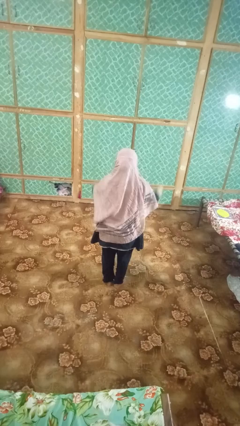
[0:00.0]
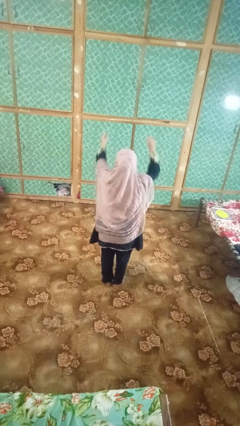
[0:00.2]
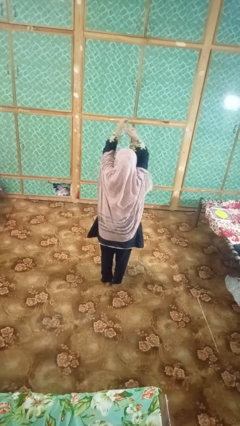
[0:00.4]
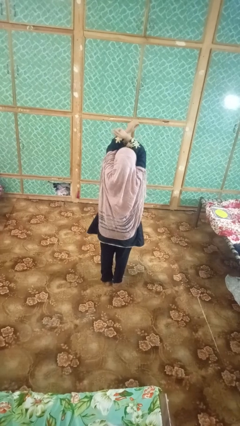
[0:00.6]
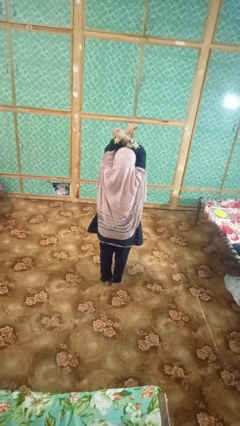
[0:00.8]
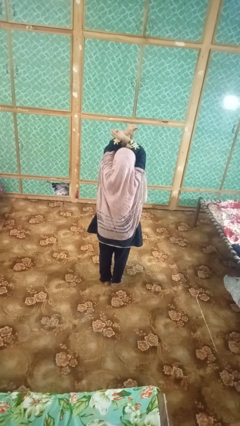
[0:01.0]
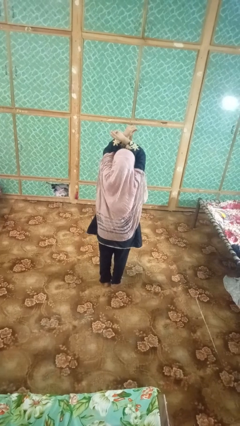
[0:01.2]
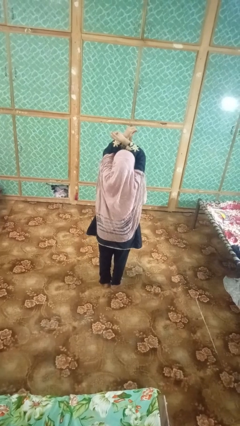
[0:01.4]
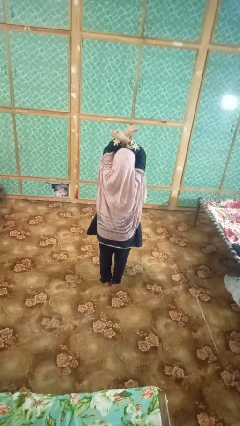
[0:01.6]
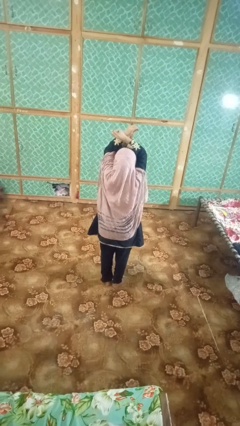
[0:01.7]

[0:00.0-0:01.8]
person gestures arms x

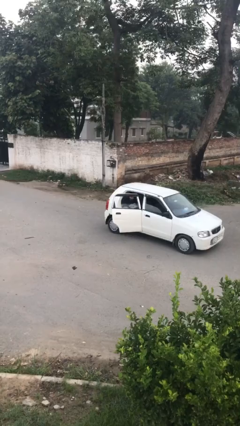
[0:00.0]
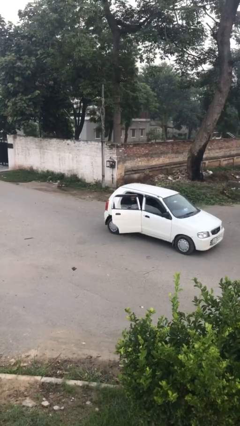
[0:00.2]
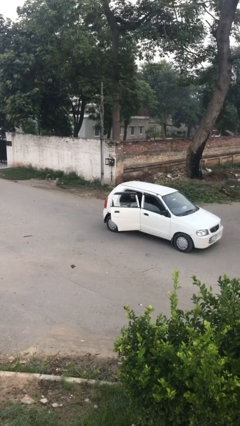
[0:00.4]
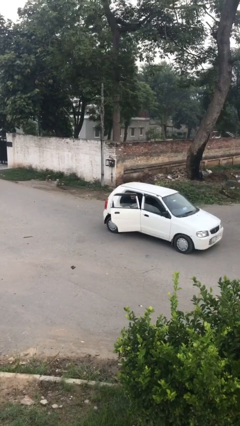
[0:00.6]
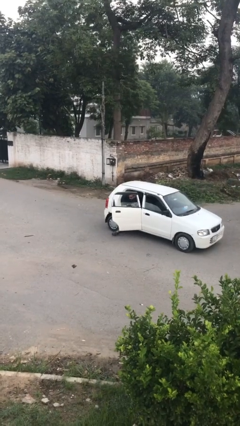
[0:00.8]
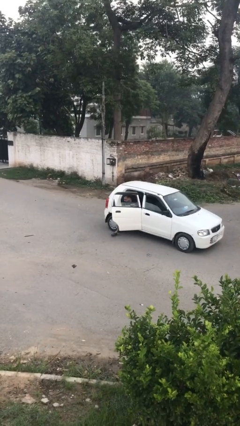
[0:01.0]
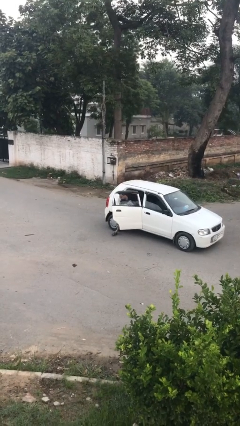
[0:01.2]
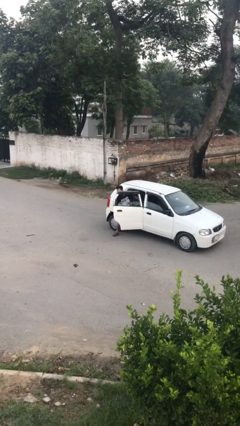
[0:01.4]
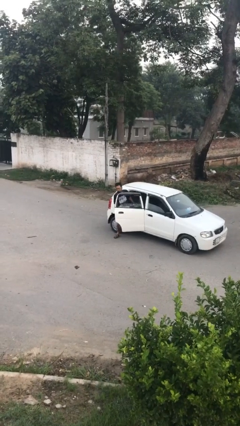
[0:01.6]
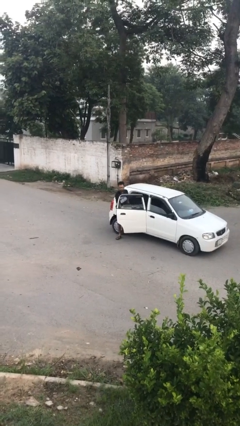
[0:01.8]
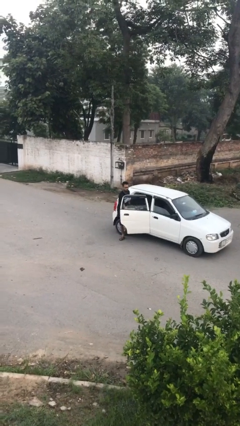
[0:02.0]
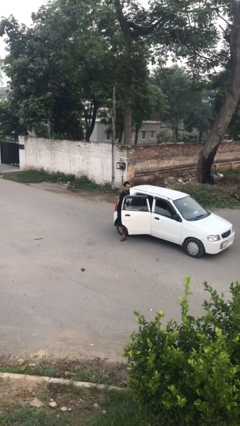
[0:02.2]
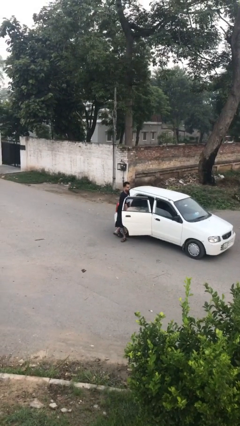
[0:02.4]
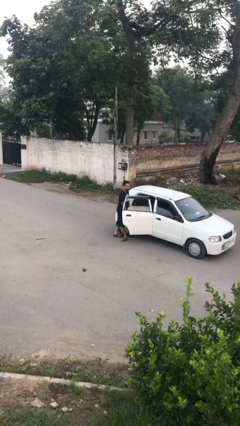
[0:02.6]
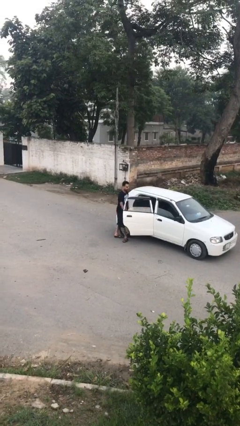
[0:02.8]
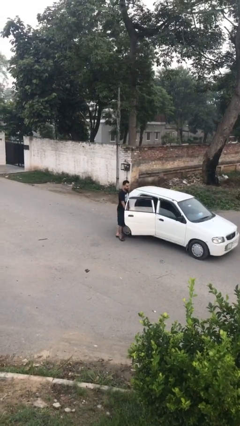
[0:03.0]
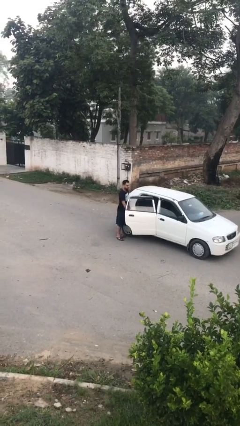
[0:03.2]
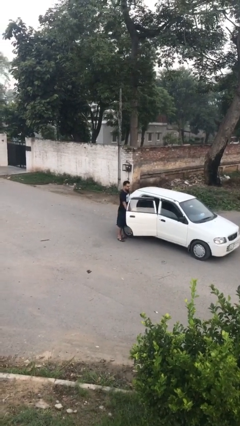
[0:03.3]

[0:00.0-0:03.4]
person exits car

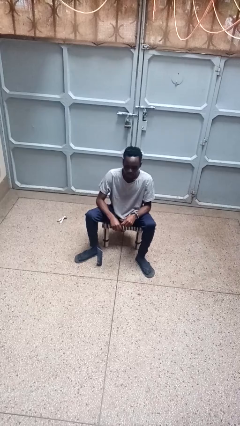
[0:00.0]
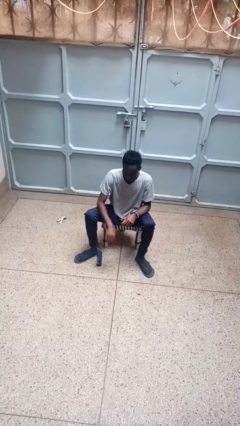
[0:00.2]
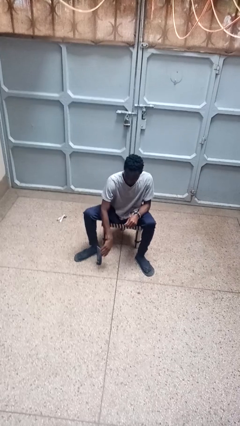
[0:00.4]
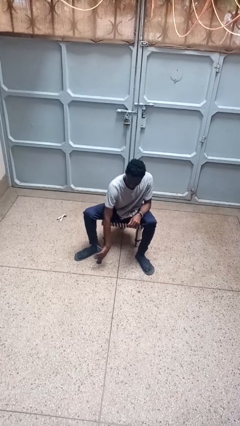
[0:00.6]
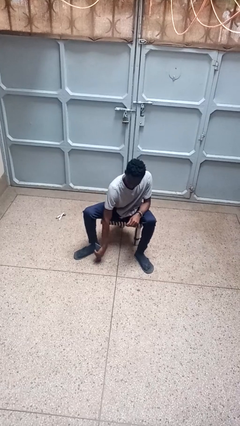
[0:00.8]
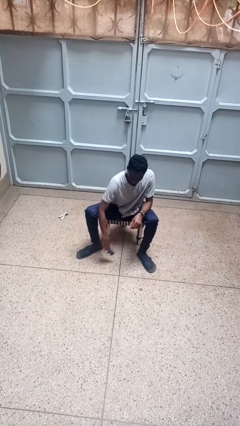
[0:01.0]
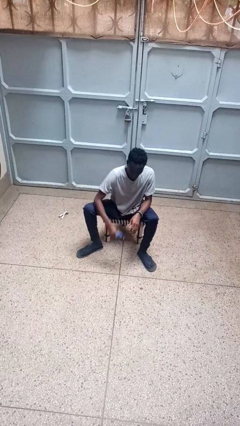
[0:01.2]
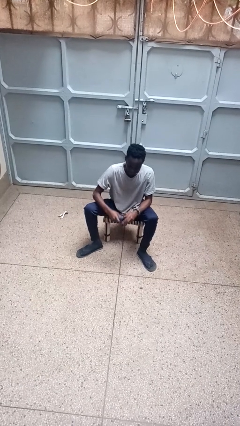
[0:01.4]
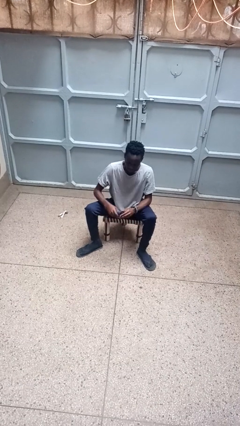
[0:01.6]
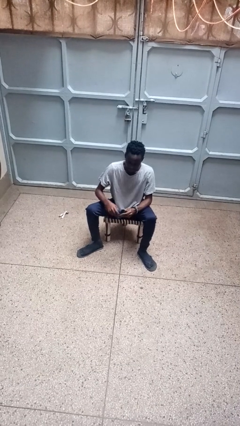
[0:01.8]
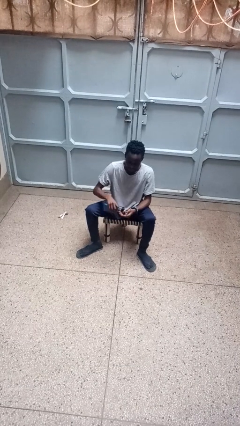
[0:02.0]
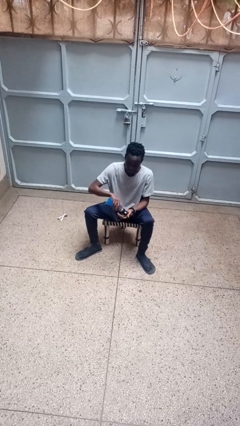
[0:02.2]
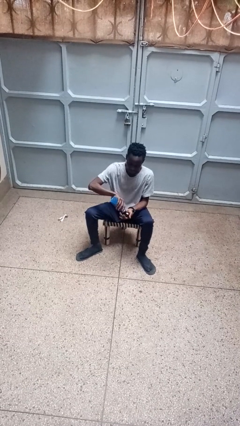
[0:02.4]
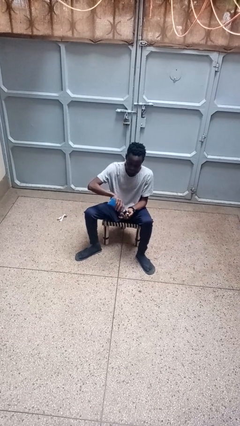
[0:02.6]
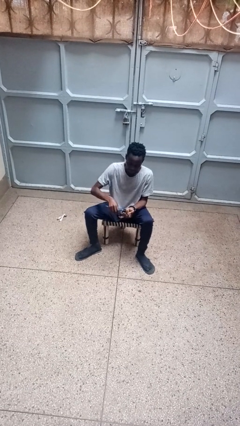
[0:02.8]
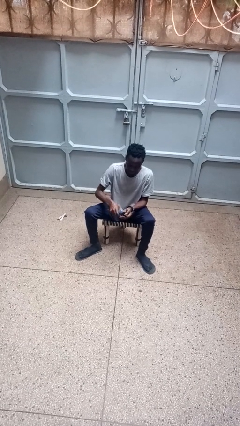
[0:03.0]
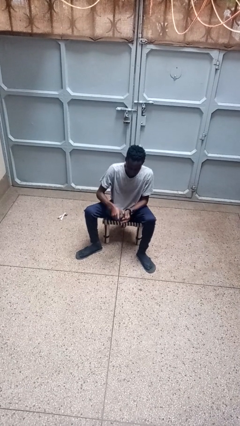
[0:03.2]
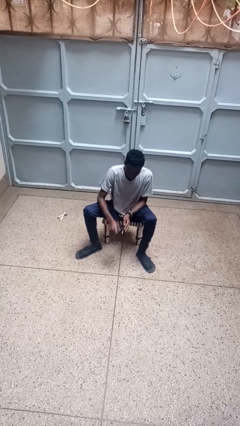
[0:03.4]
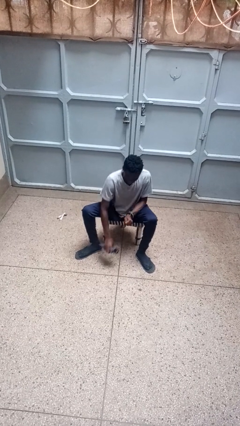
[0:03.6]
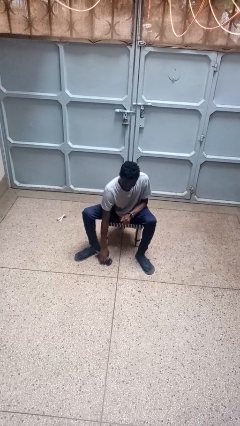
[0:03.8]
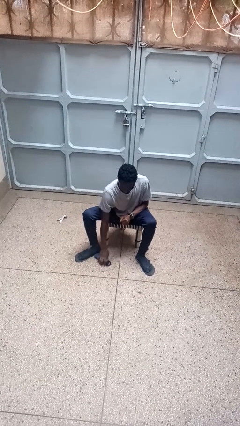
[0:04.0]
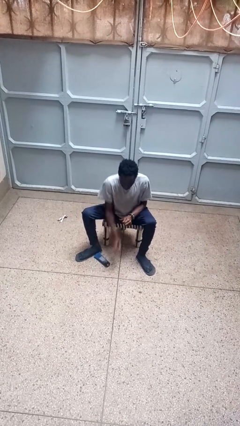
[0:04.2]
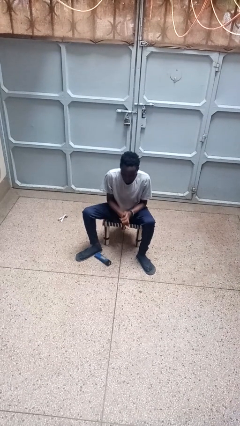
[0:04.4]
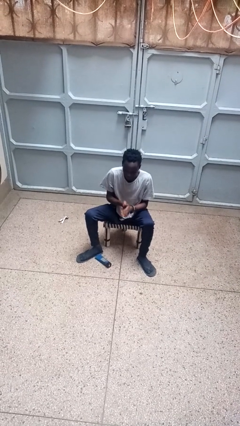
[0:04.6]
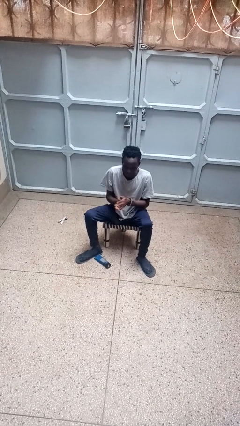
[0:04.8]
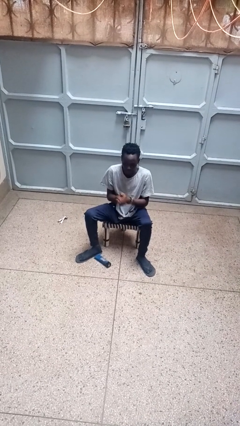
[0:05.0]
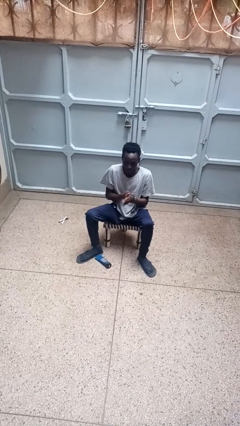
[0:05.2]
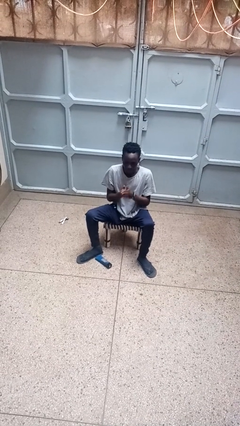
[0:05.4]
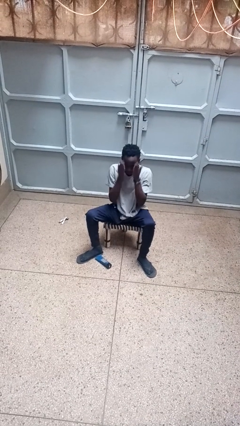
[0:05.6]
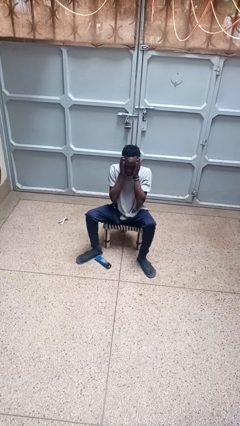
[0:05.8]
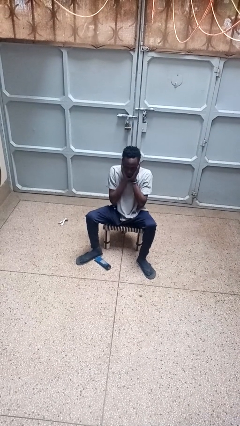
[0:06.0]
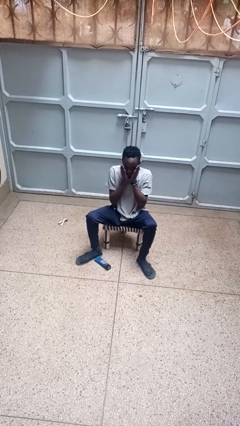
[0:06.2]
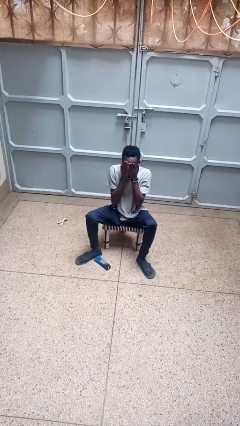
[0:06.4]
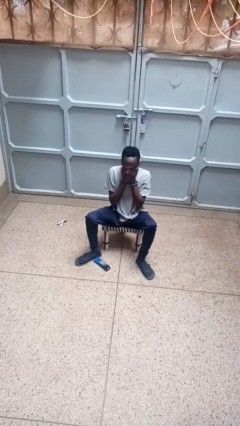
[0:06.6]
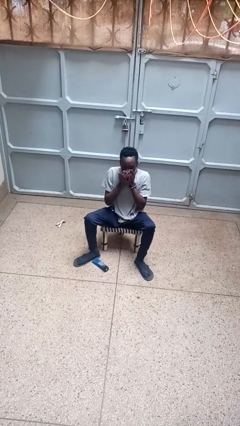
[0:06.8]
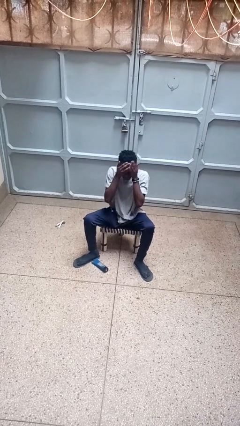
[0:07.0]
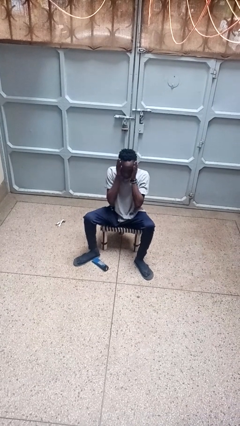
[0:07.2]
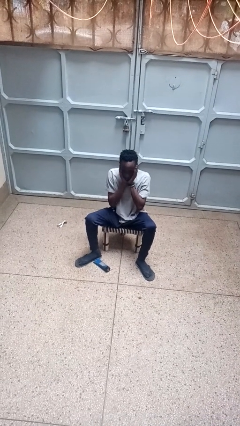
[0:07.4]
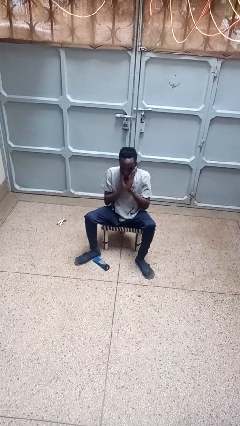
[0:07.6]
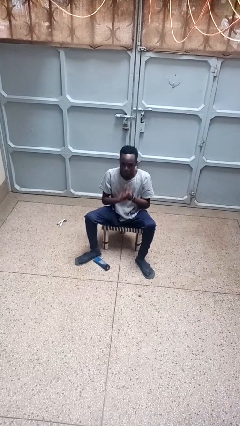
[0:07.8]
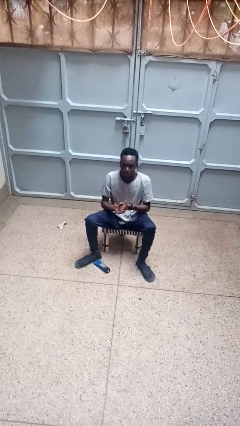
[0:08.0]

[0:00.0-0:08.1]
person applies facial moisturizer

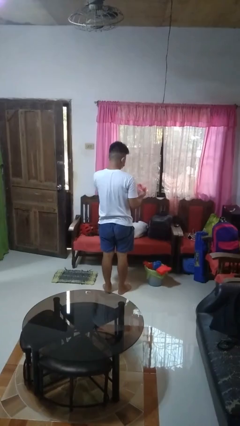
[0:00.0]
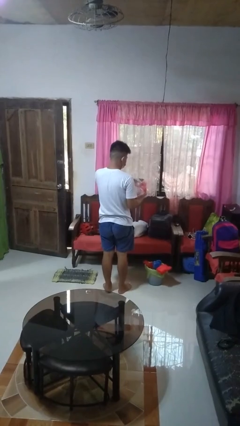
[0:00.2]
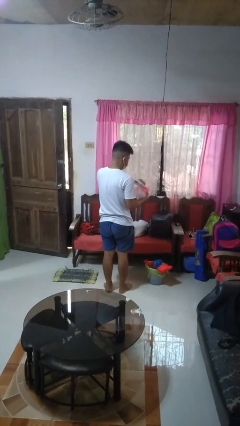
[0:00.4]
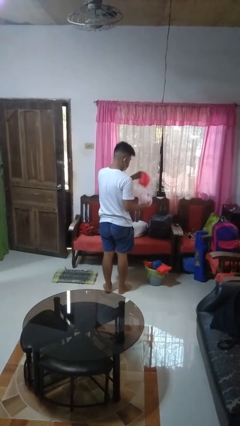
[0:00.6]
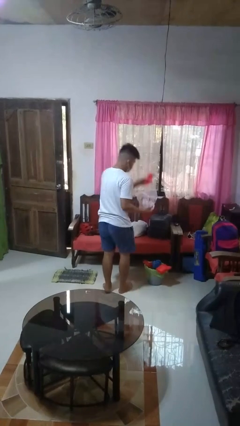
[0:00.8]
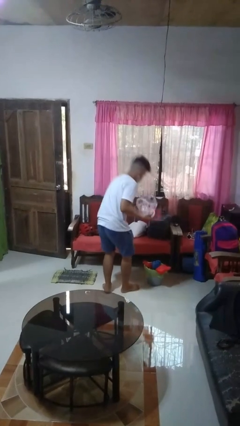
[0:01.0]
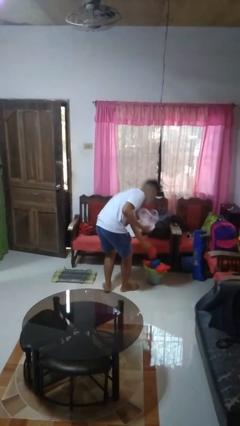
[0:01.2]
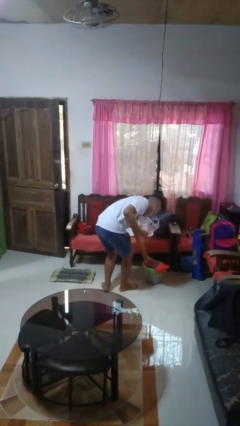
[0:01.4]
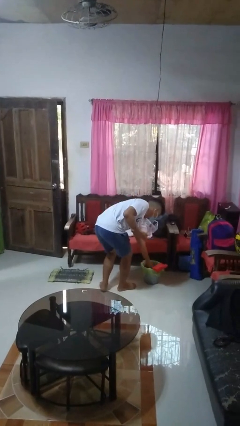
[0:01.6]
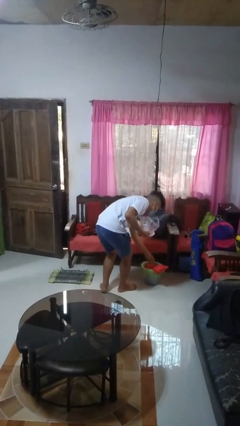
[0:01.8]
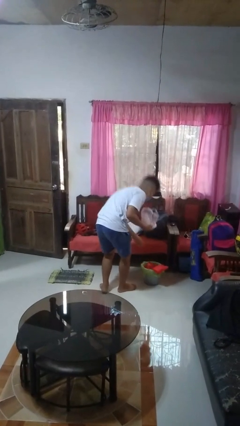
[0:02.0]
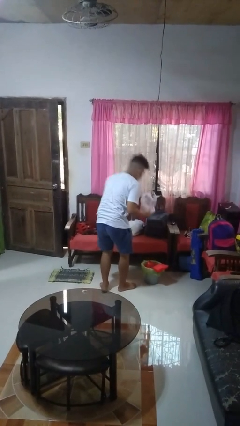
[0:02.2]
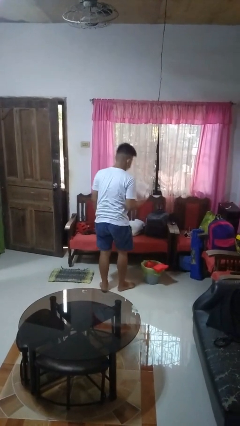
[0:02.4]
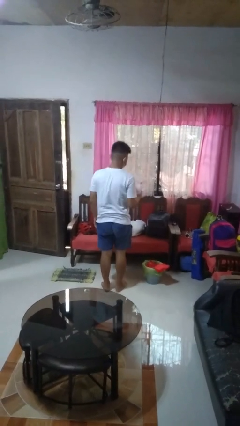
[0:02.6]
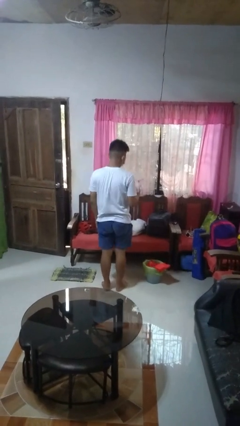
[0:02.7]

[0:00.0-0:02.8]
person discards trash

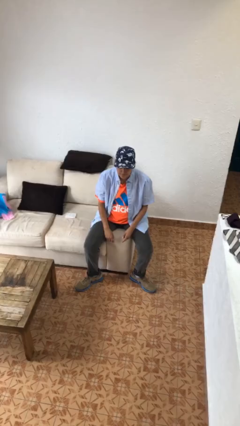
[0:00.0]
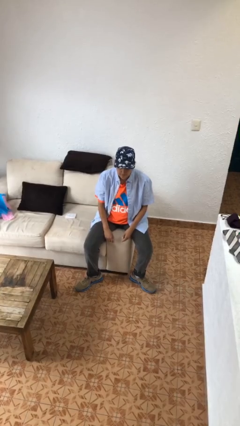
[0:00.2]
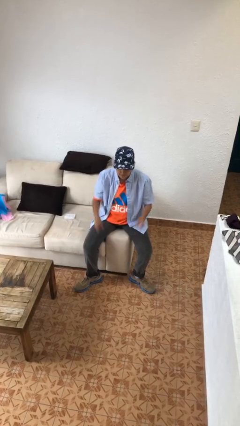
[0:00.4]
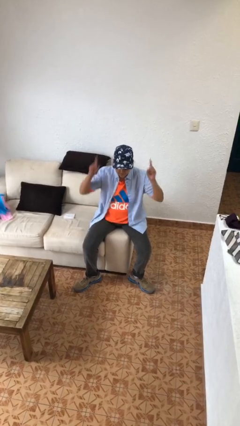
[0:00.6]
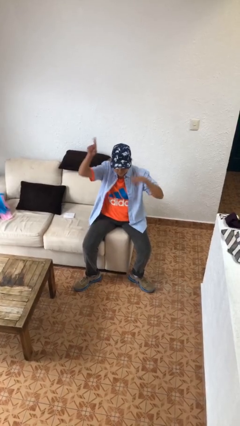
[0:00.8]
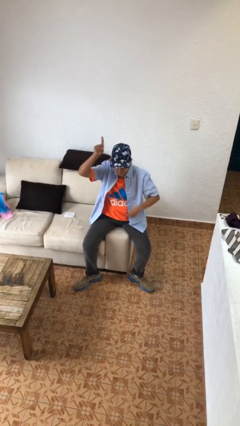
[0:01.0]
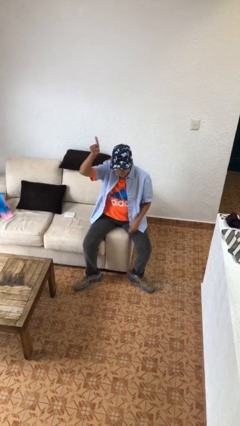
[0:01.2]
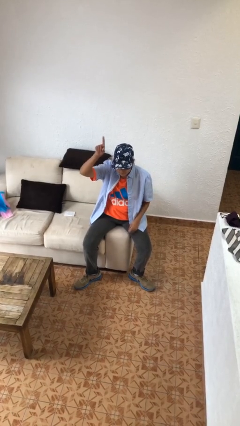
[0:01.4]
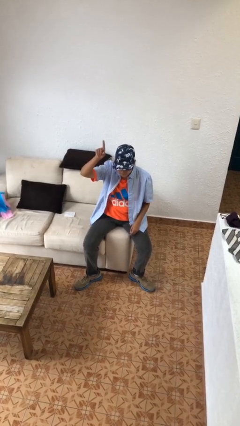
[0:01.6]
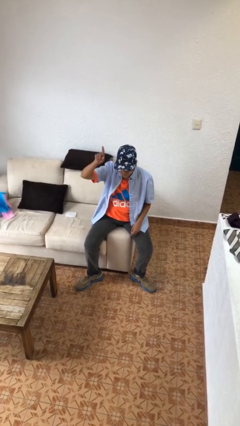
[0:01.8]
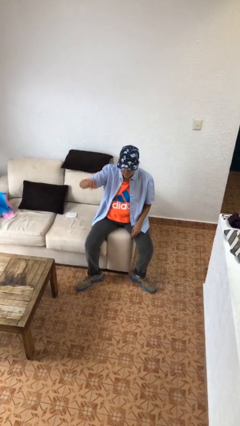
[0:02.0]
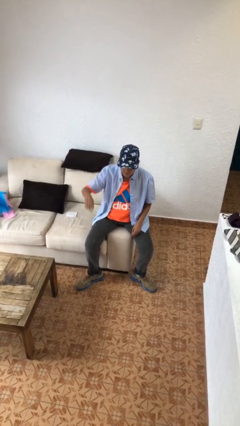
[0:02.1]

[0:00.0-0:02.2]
person gestures number one
